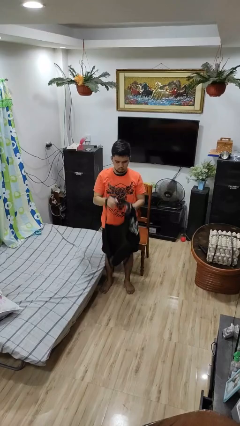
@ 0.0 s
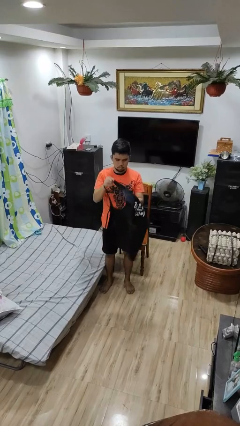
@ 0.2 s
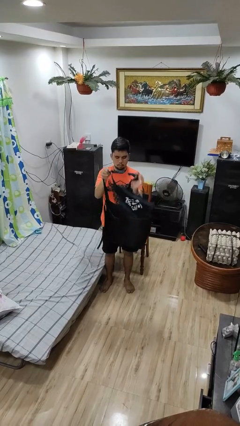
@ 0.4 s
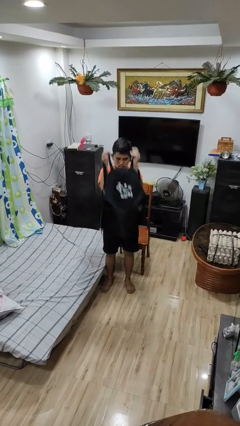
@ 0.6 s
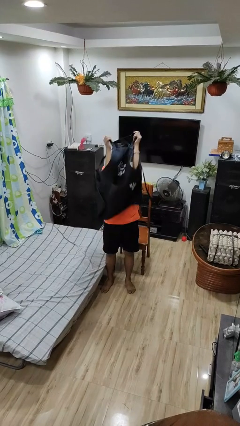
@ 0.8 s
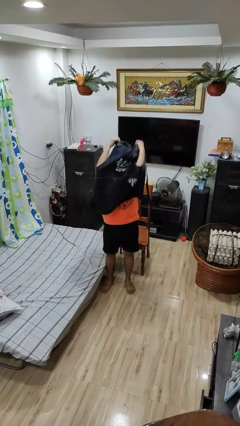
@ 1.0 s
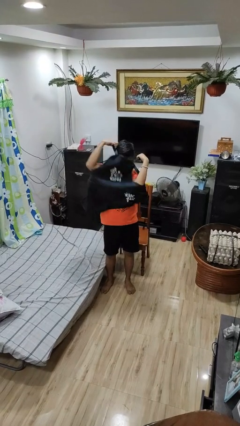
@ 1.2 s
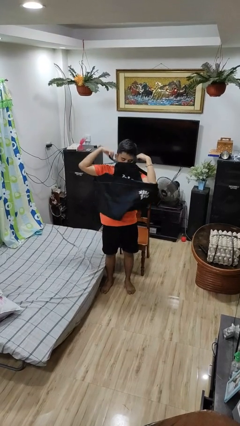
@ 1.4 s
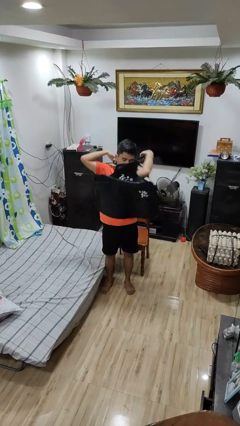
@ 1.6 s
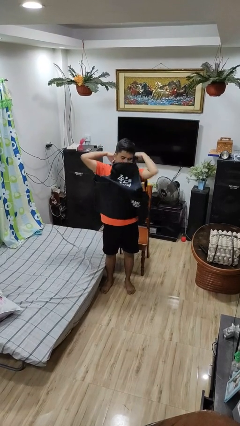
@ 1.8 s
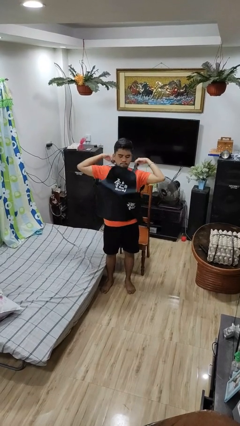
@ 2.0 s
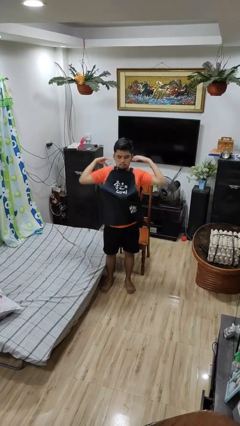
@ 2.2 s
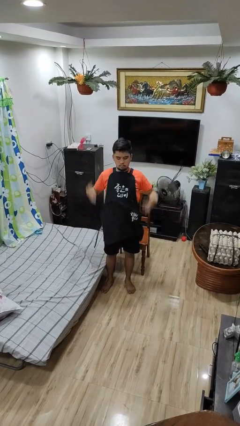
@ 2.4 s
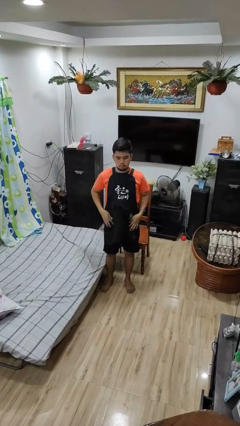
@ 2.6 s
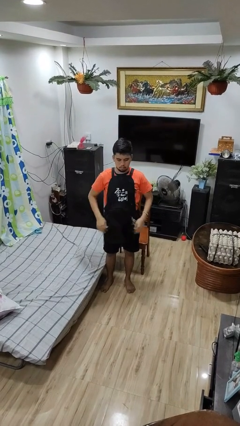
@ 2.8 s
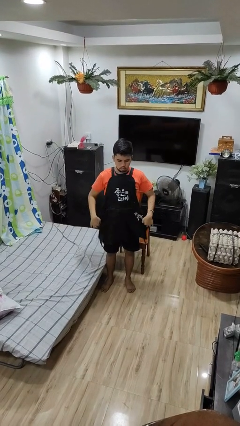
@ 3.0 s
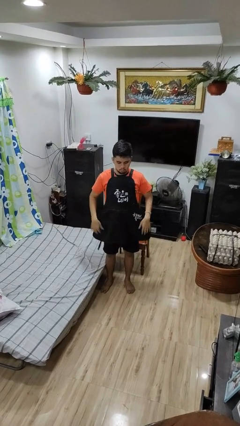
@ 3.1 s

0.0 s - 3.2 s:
person puts on apron

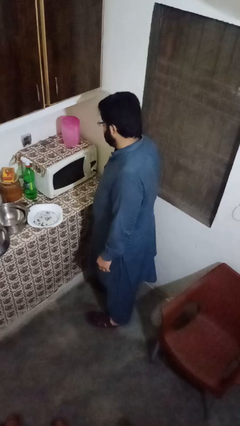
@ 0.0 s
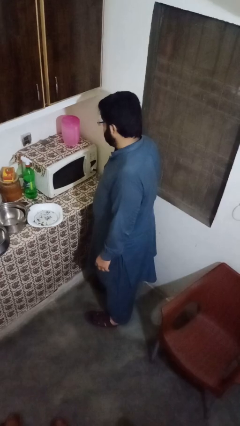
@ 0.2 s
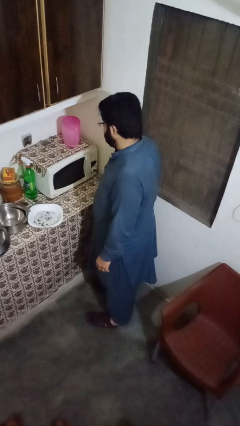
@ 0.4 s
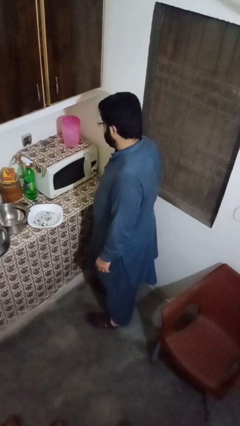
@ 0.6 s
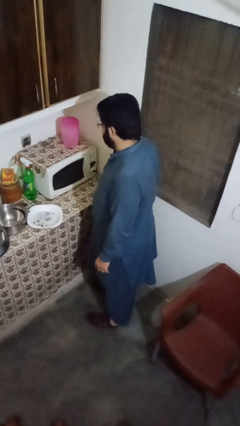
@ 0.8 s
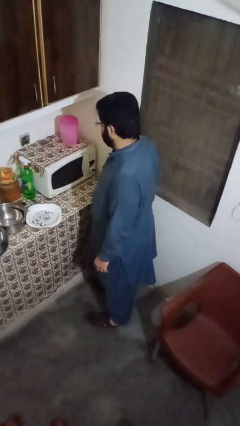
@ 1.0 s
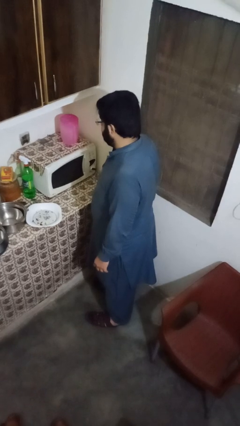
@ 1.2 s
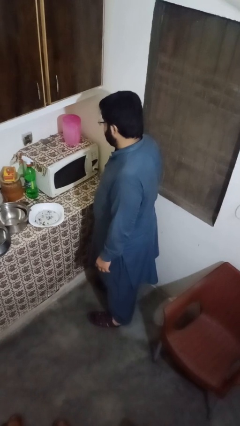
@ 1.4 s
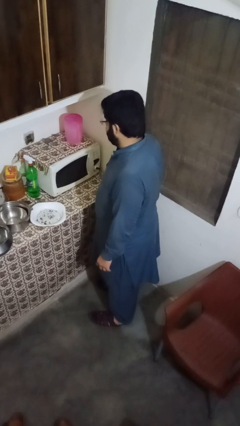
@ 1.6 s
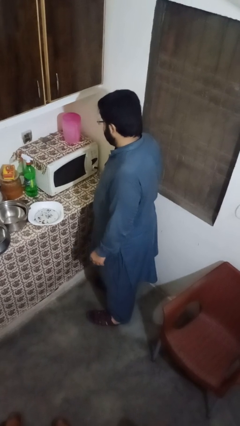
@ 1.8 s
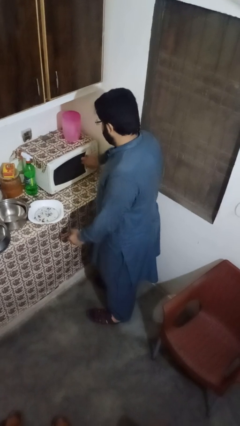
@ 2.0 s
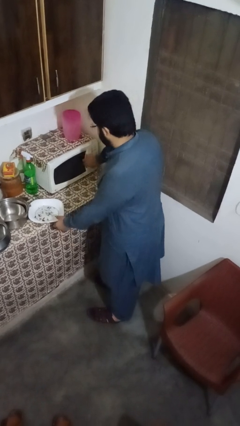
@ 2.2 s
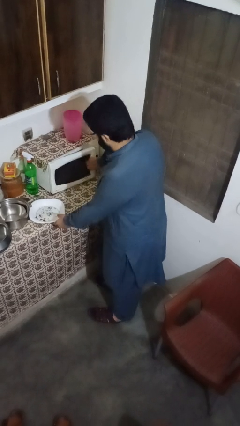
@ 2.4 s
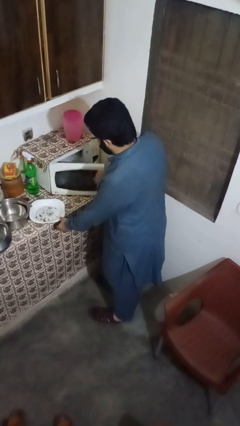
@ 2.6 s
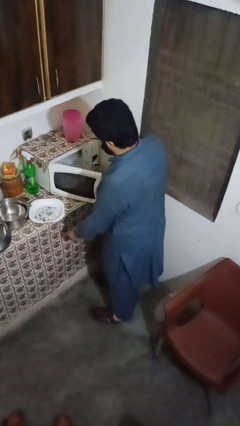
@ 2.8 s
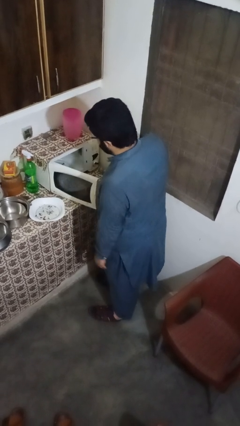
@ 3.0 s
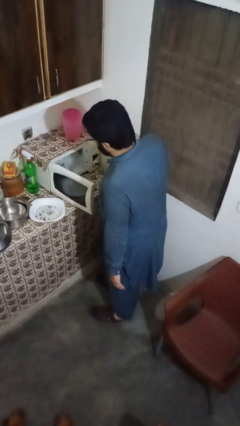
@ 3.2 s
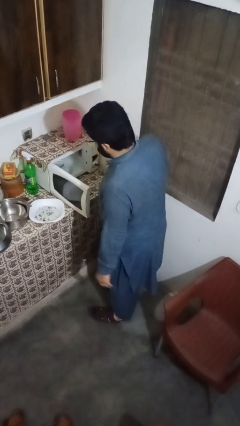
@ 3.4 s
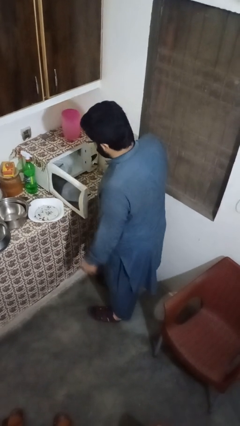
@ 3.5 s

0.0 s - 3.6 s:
person opens microwave

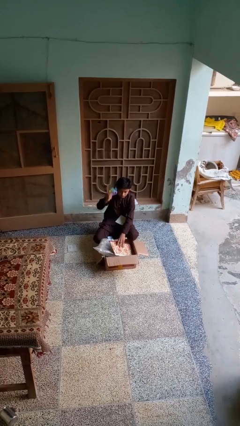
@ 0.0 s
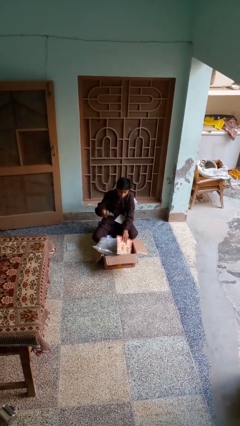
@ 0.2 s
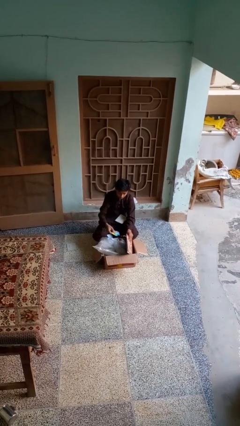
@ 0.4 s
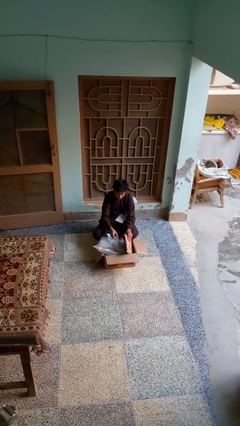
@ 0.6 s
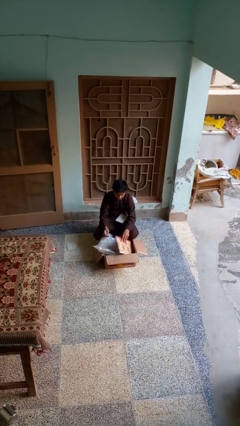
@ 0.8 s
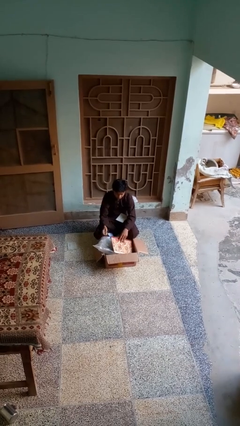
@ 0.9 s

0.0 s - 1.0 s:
person puts object into box

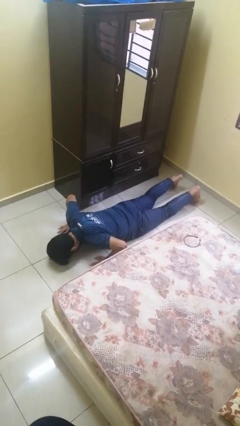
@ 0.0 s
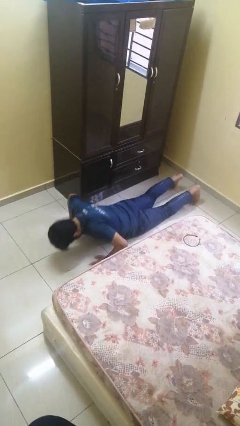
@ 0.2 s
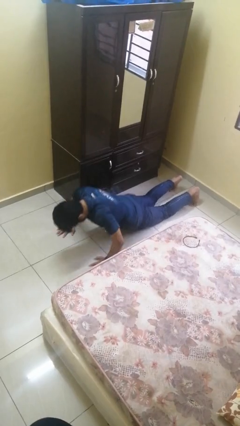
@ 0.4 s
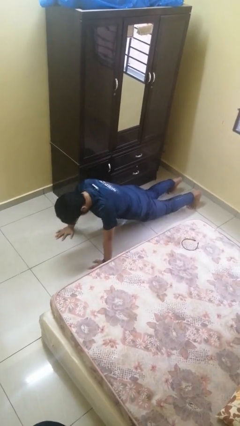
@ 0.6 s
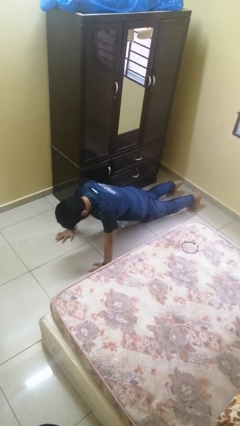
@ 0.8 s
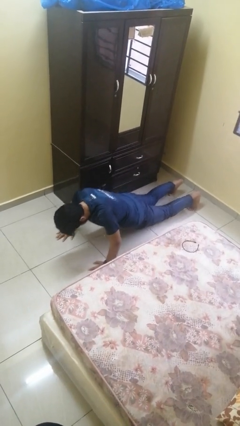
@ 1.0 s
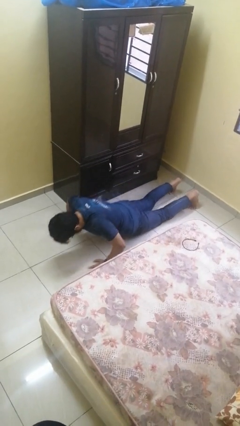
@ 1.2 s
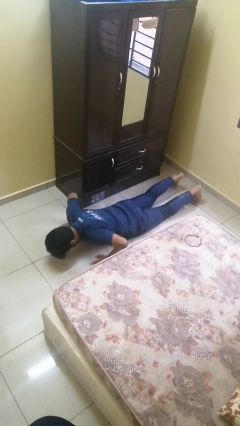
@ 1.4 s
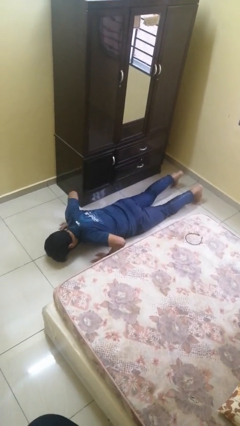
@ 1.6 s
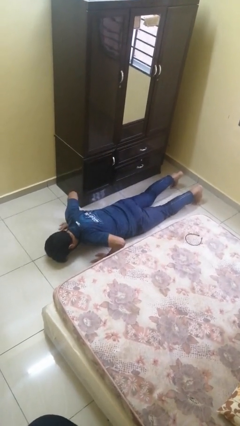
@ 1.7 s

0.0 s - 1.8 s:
person exercises with pushup

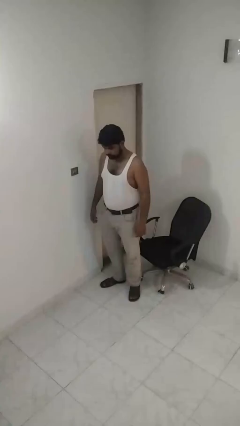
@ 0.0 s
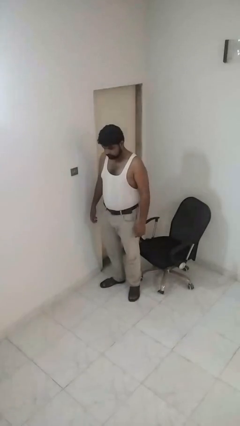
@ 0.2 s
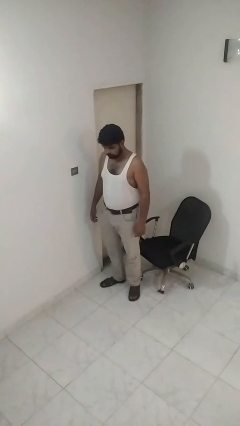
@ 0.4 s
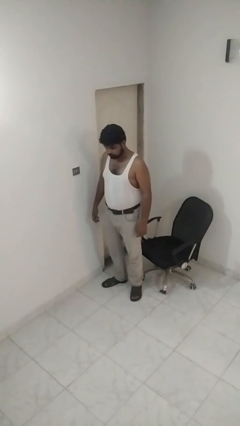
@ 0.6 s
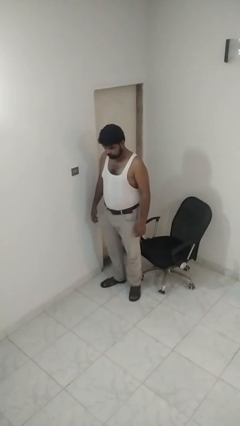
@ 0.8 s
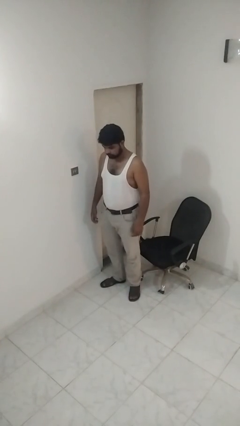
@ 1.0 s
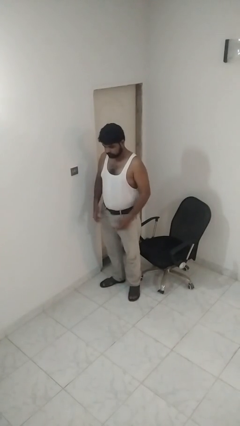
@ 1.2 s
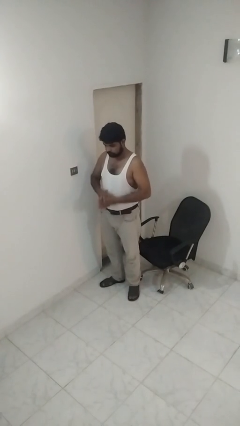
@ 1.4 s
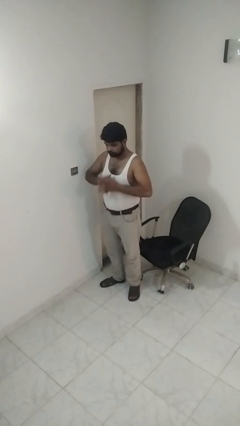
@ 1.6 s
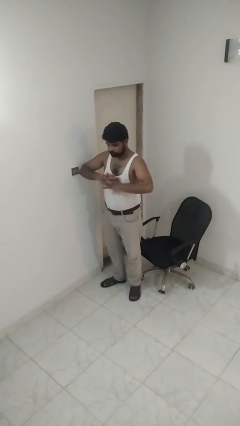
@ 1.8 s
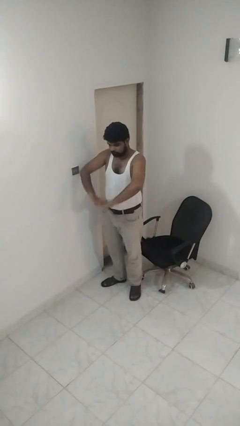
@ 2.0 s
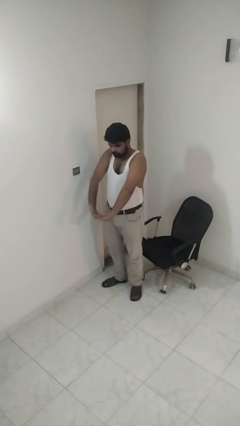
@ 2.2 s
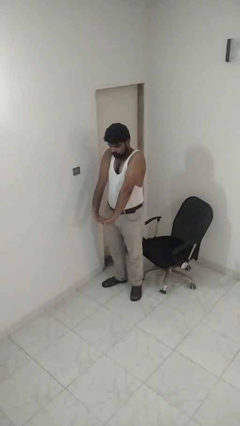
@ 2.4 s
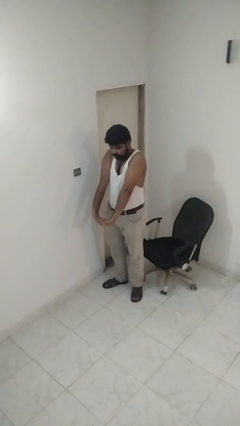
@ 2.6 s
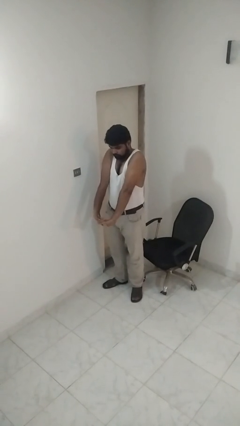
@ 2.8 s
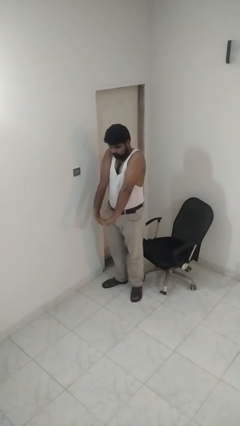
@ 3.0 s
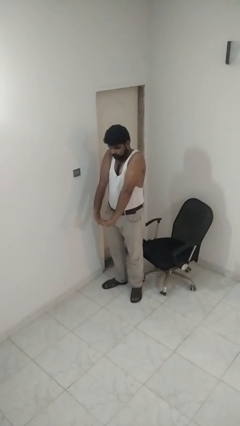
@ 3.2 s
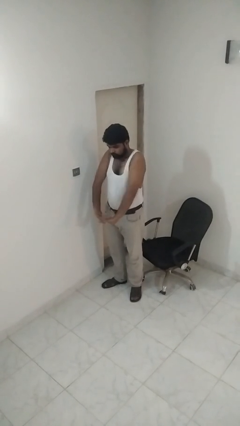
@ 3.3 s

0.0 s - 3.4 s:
person cracks knuckles

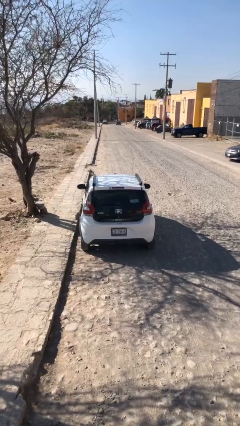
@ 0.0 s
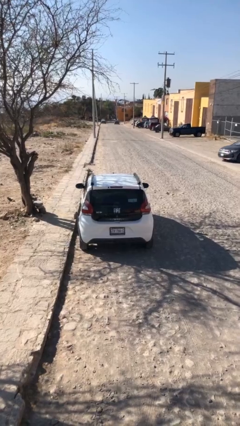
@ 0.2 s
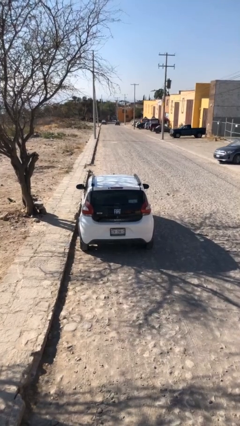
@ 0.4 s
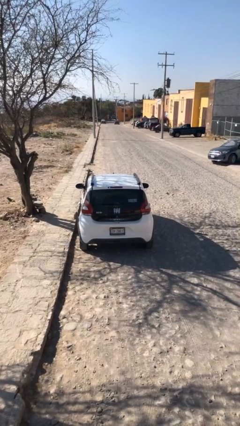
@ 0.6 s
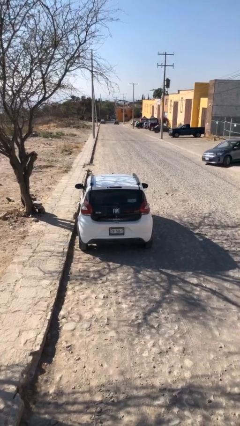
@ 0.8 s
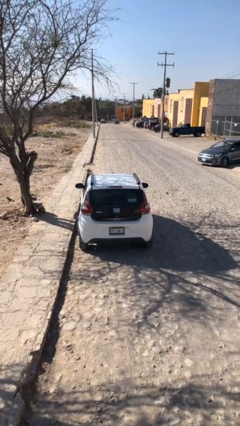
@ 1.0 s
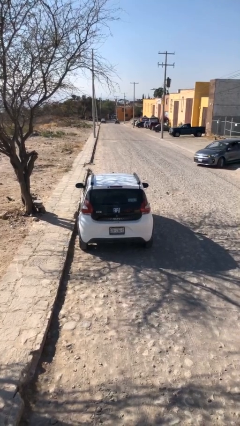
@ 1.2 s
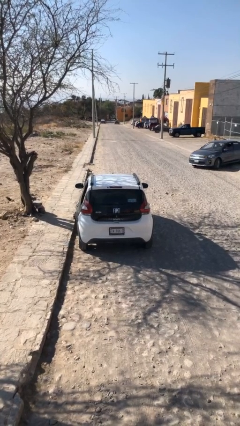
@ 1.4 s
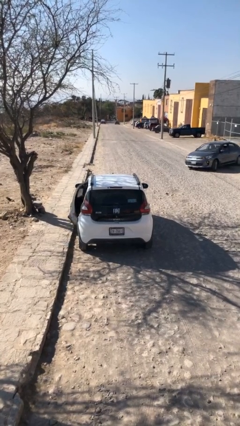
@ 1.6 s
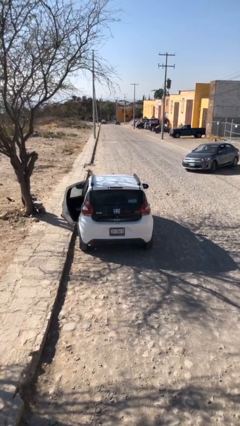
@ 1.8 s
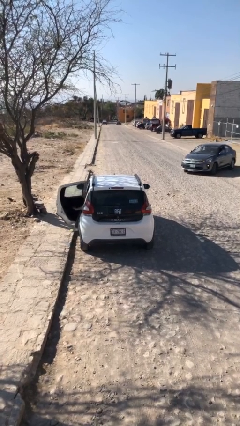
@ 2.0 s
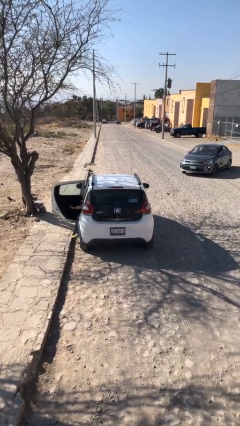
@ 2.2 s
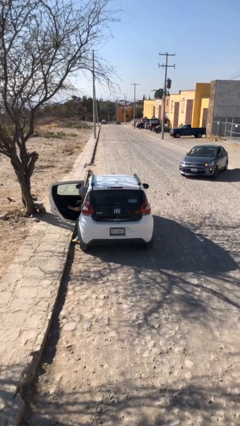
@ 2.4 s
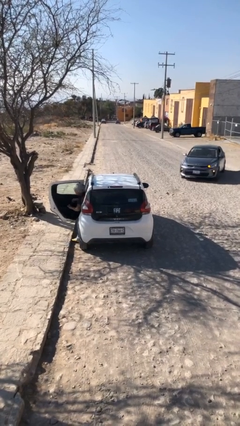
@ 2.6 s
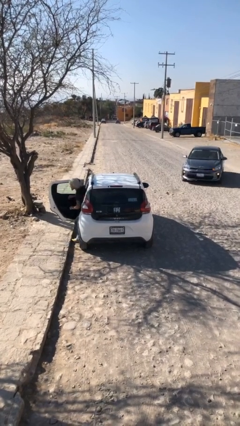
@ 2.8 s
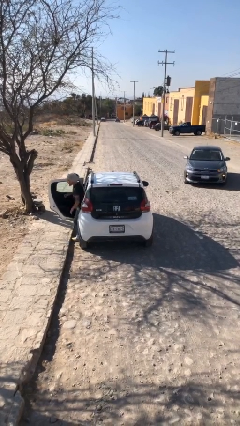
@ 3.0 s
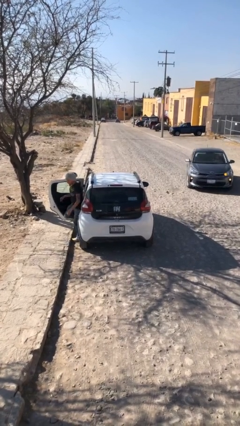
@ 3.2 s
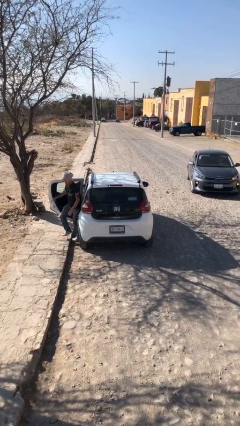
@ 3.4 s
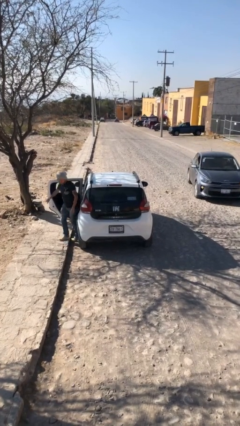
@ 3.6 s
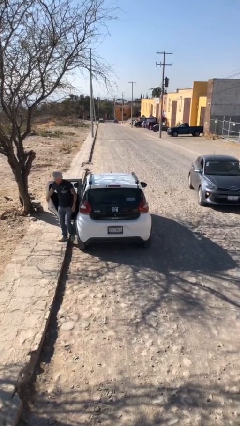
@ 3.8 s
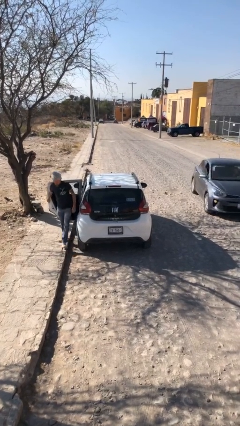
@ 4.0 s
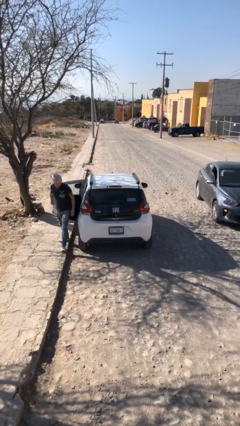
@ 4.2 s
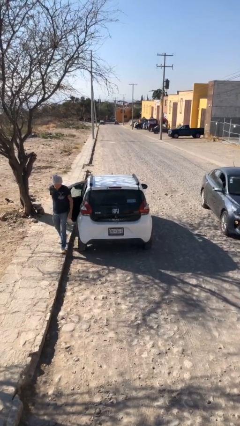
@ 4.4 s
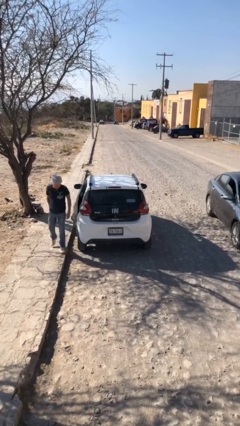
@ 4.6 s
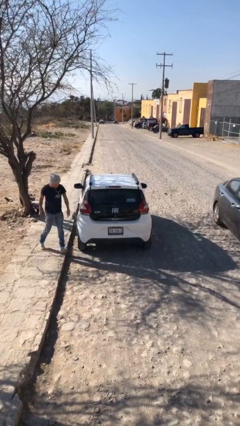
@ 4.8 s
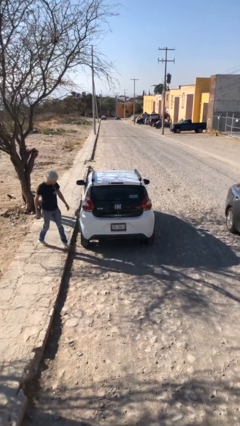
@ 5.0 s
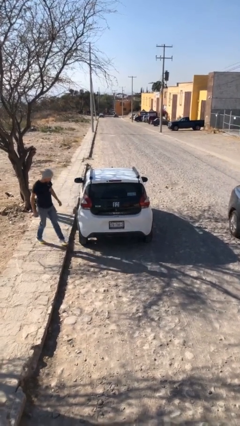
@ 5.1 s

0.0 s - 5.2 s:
car drops off person
